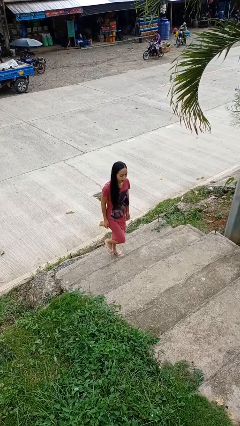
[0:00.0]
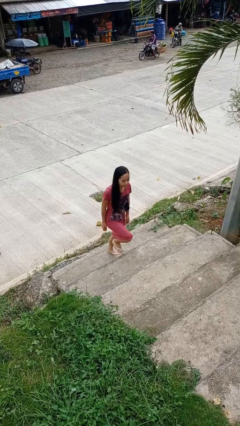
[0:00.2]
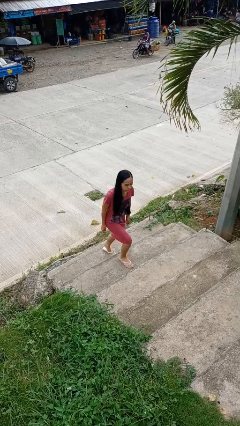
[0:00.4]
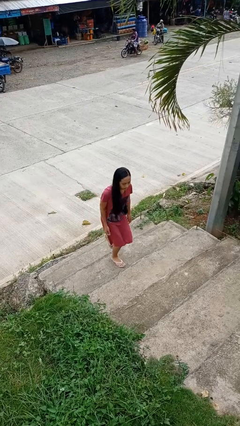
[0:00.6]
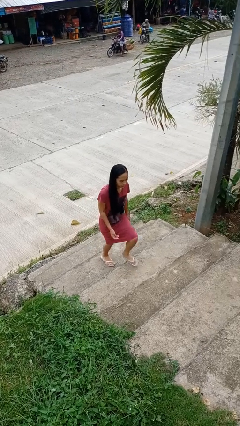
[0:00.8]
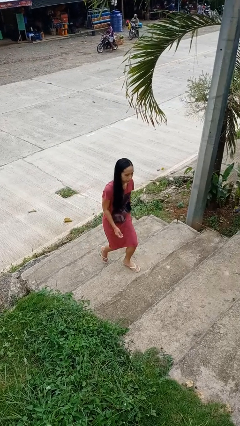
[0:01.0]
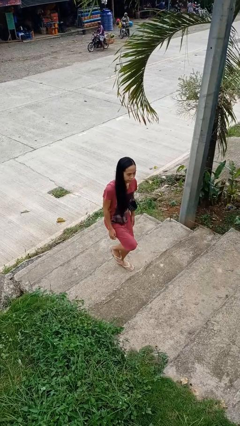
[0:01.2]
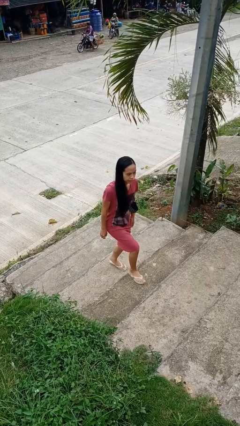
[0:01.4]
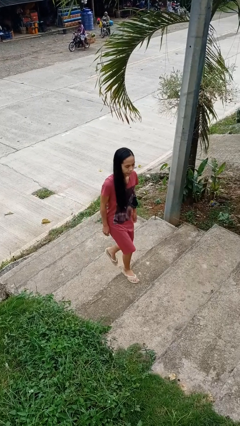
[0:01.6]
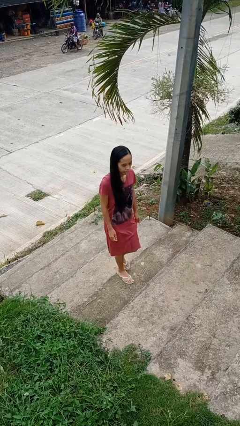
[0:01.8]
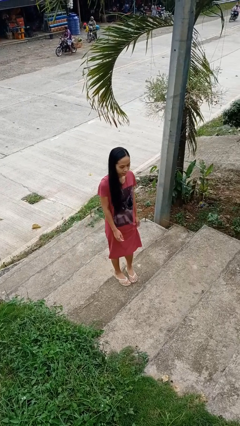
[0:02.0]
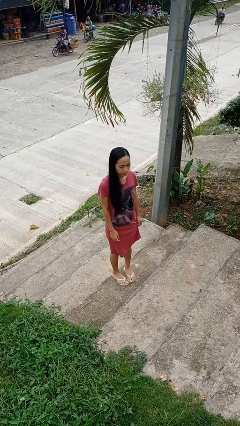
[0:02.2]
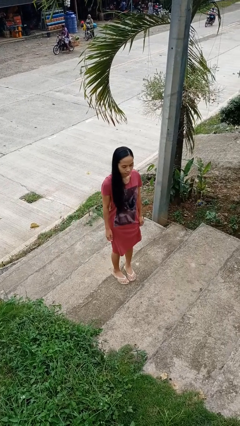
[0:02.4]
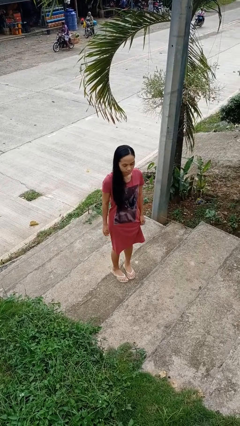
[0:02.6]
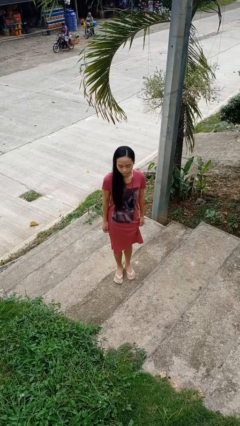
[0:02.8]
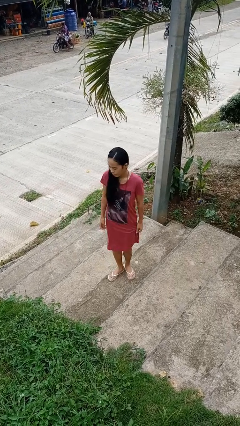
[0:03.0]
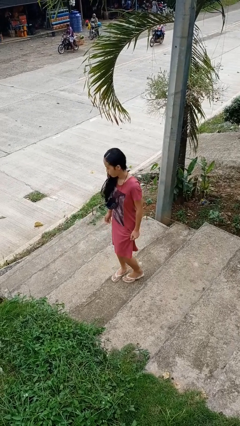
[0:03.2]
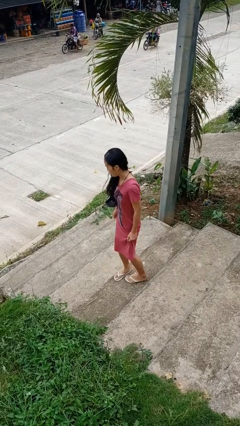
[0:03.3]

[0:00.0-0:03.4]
person climbs up stairs

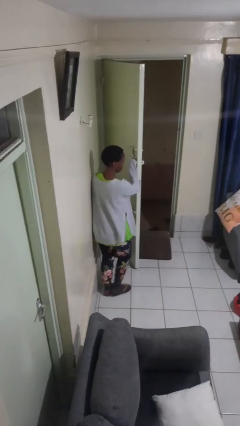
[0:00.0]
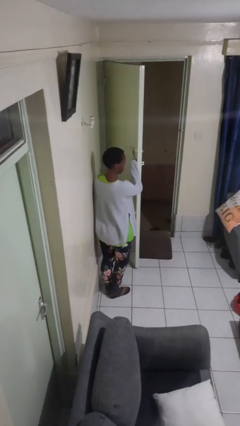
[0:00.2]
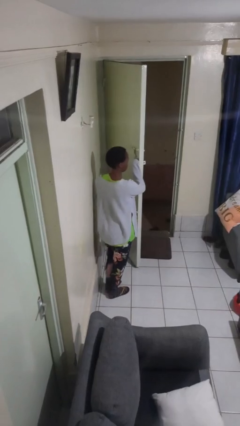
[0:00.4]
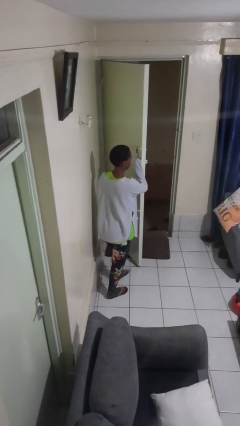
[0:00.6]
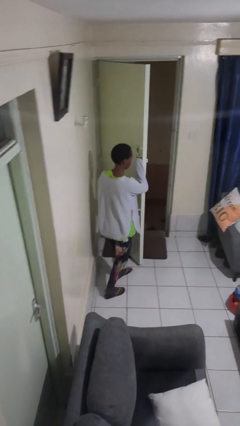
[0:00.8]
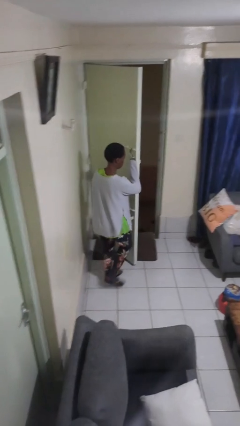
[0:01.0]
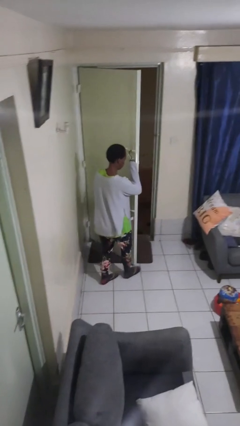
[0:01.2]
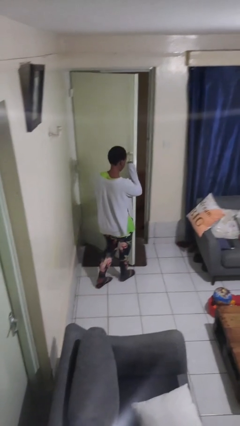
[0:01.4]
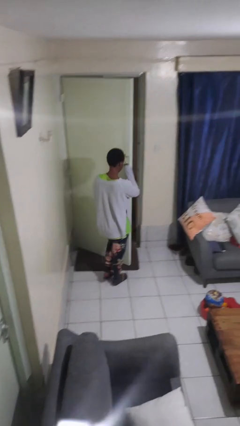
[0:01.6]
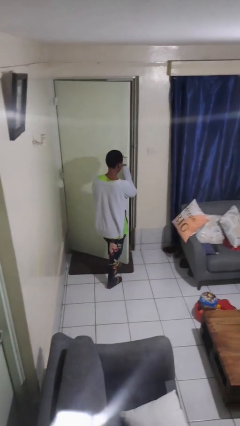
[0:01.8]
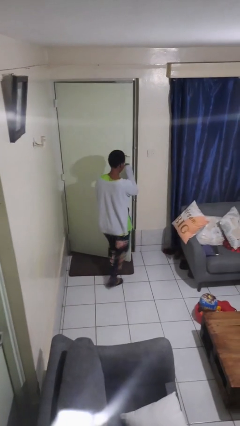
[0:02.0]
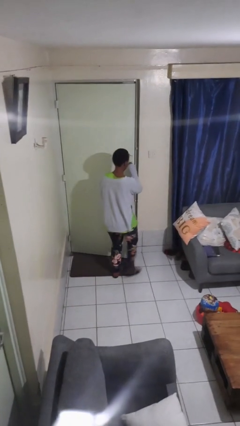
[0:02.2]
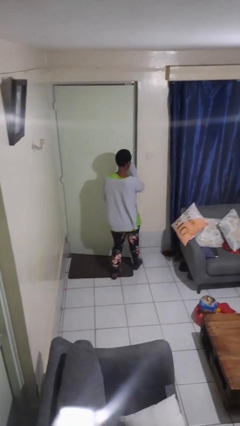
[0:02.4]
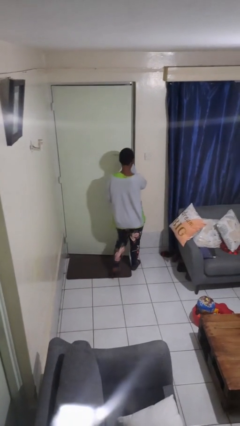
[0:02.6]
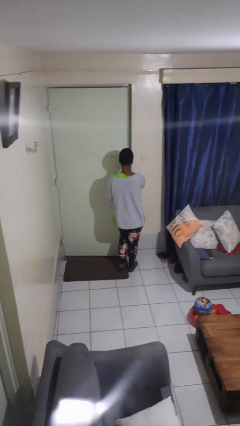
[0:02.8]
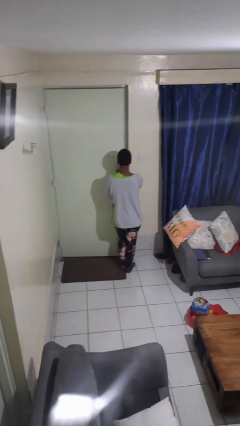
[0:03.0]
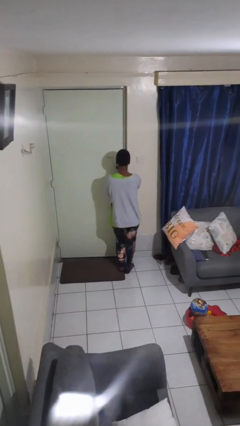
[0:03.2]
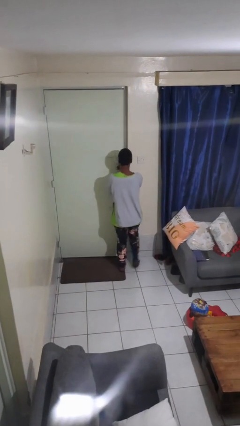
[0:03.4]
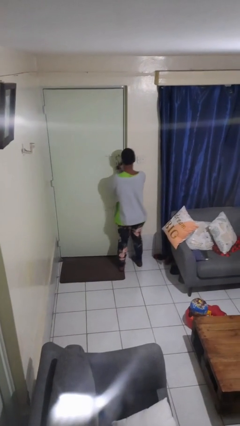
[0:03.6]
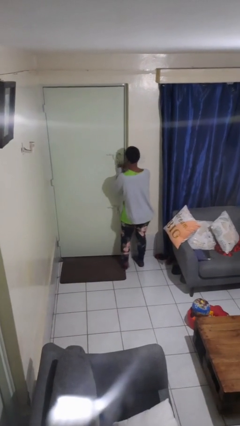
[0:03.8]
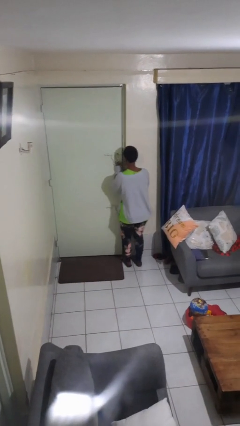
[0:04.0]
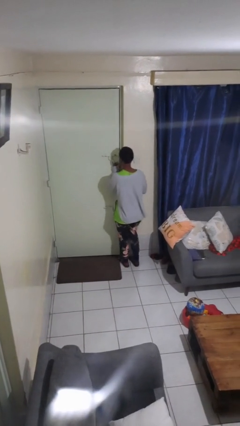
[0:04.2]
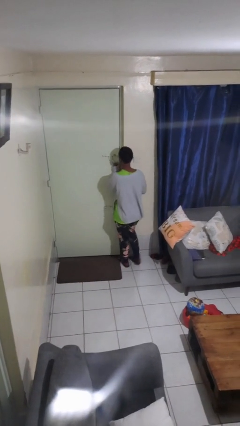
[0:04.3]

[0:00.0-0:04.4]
person closes facility door

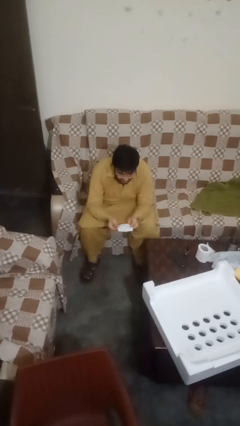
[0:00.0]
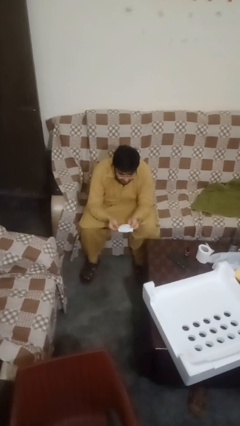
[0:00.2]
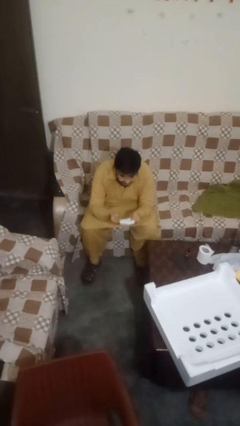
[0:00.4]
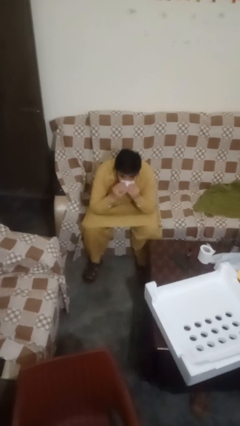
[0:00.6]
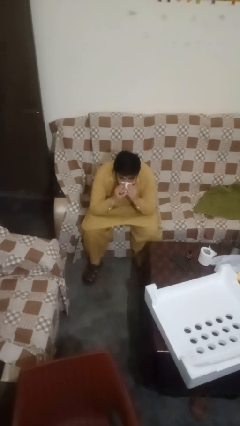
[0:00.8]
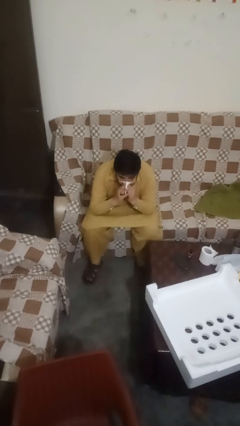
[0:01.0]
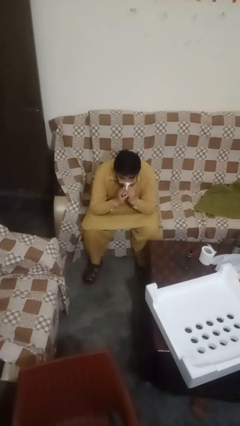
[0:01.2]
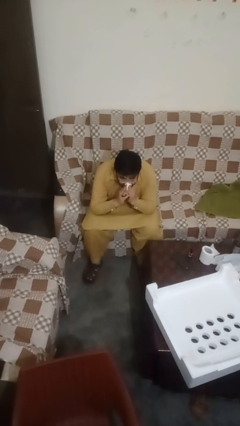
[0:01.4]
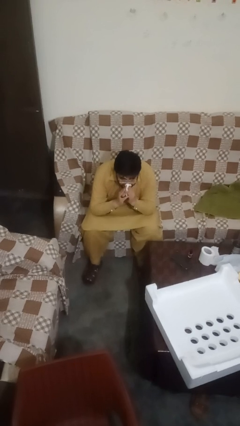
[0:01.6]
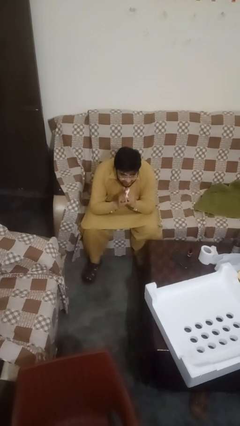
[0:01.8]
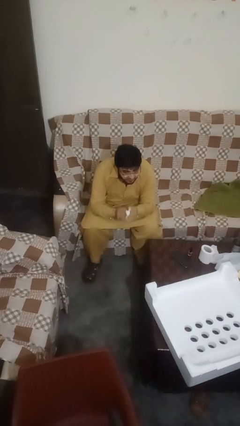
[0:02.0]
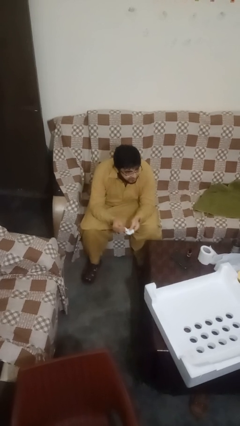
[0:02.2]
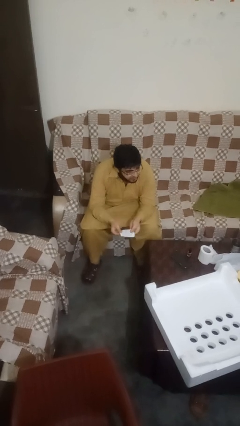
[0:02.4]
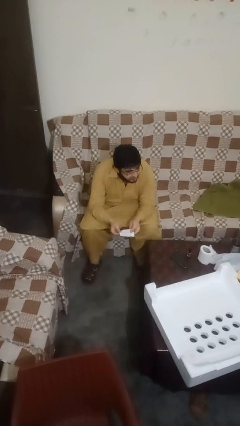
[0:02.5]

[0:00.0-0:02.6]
person blows nose

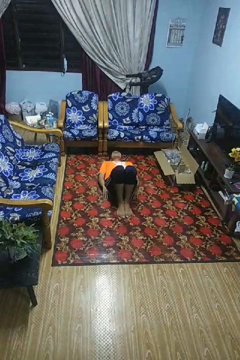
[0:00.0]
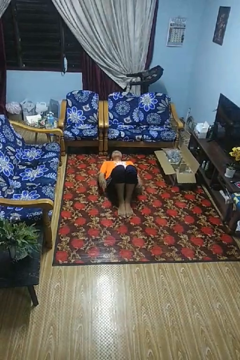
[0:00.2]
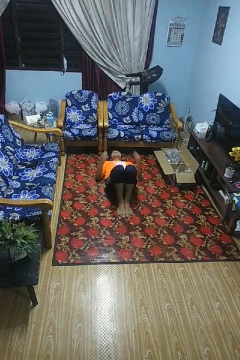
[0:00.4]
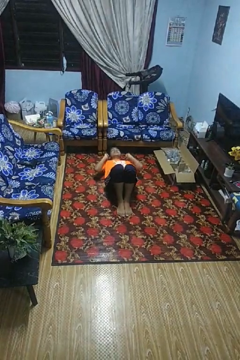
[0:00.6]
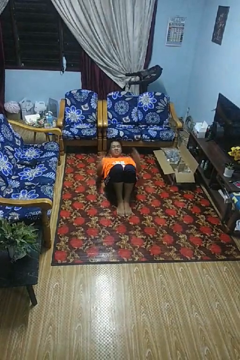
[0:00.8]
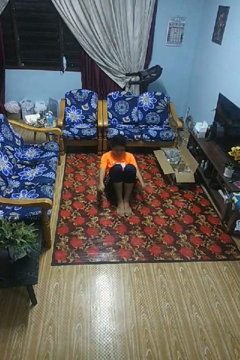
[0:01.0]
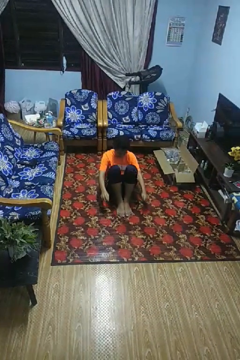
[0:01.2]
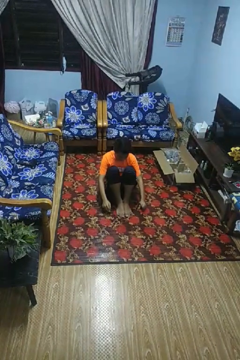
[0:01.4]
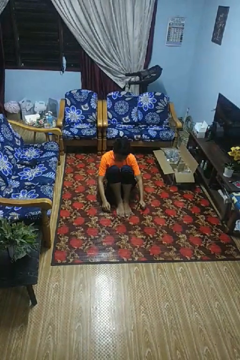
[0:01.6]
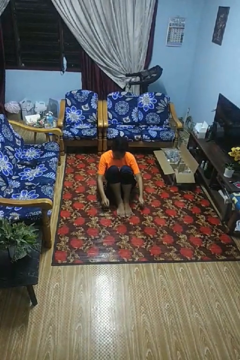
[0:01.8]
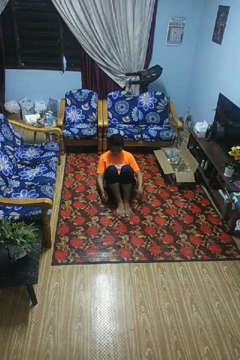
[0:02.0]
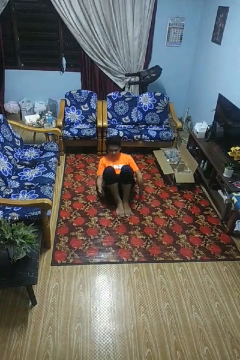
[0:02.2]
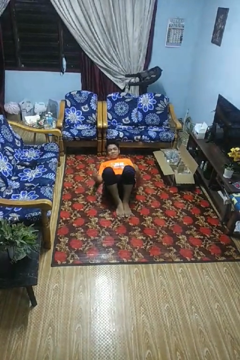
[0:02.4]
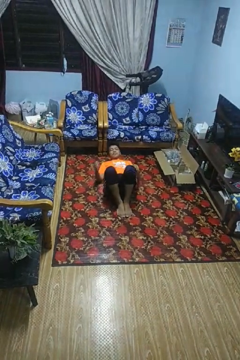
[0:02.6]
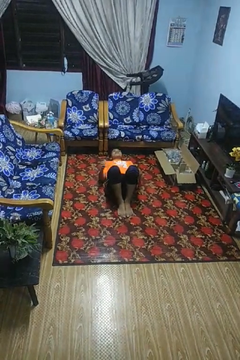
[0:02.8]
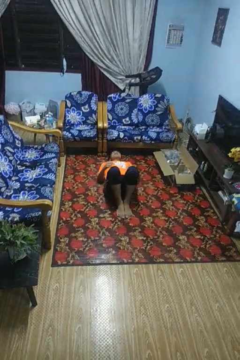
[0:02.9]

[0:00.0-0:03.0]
person exercises with situp

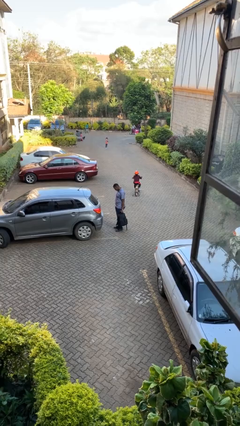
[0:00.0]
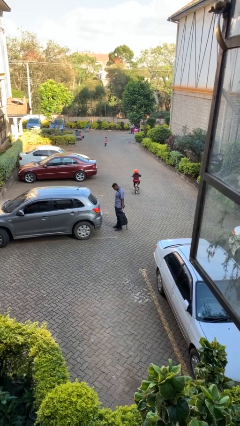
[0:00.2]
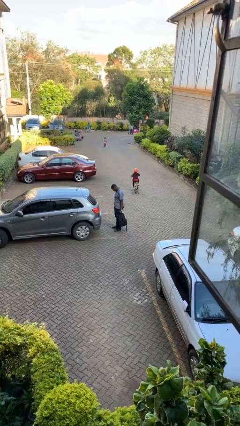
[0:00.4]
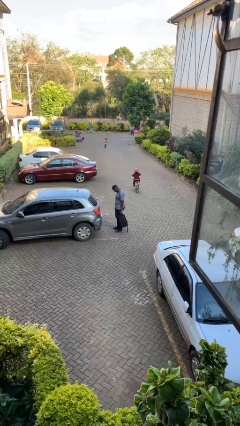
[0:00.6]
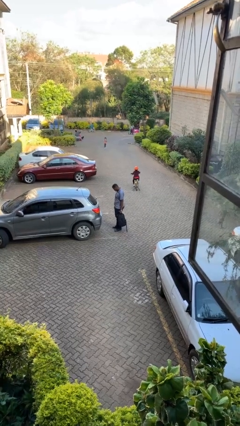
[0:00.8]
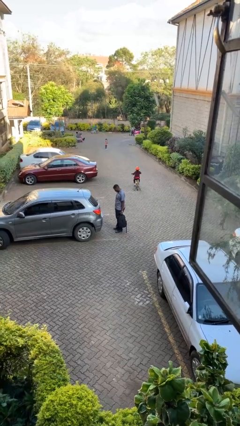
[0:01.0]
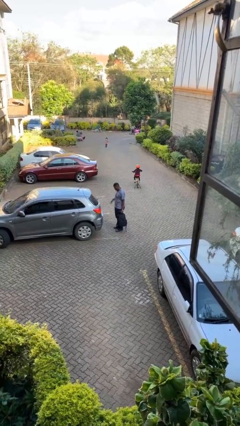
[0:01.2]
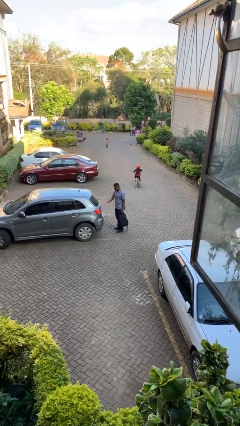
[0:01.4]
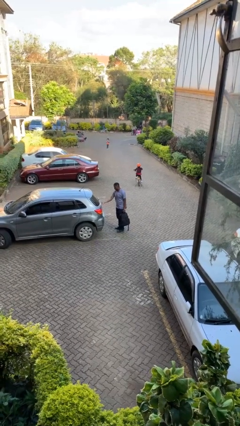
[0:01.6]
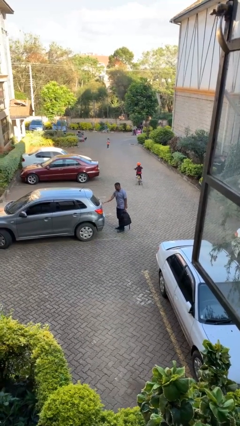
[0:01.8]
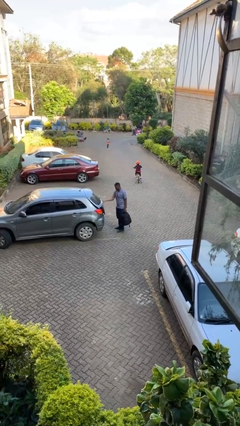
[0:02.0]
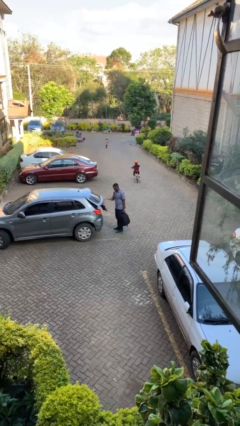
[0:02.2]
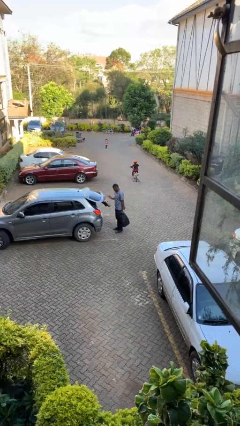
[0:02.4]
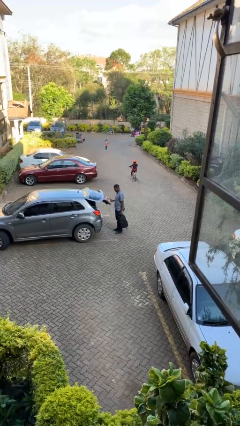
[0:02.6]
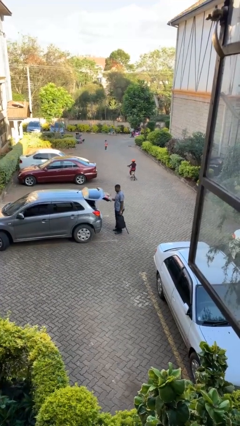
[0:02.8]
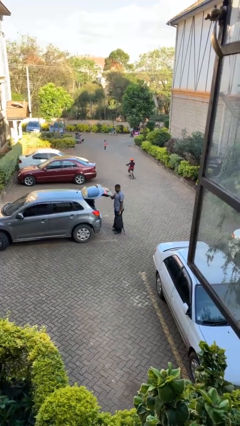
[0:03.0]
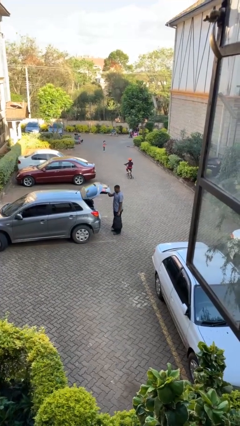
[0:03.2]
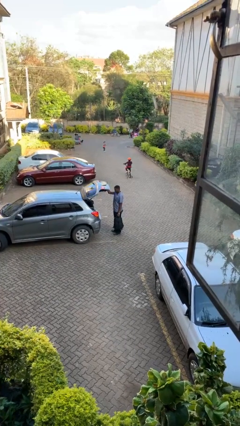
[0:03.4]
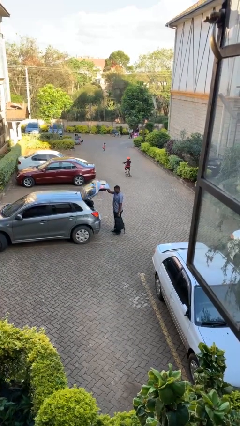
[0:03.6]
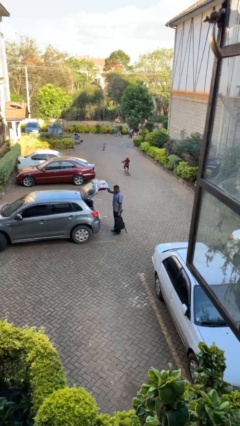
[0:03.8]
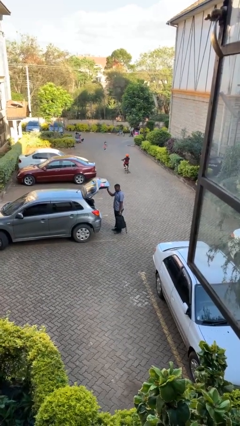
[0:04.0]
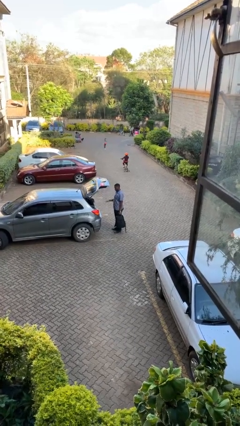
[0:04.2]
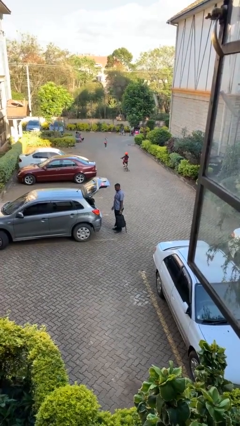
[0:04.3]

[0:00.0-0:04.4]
person opens car trunk
